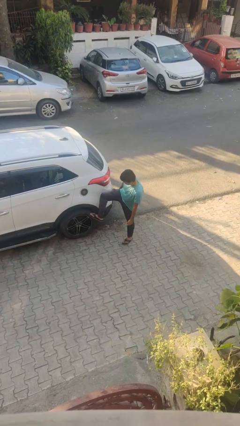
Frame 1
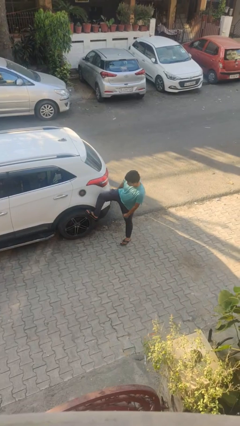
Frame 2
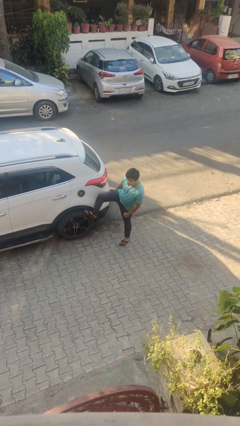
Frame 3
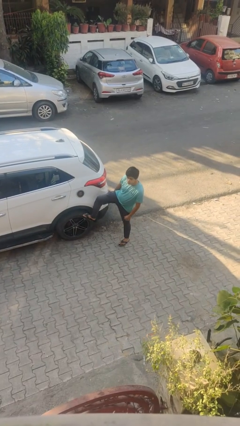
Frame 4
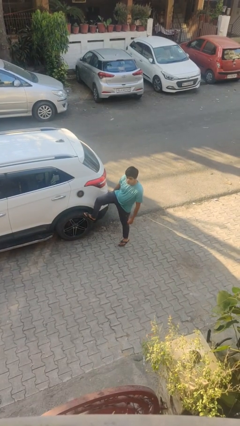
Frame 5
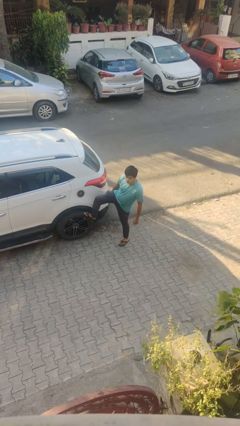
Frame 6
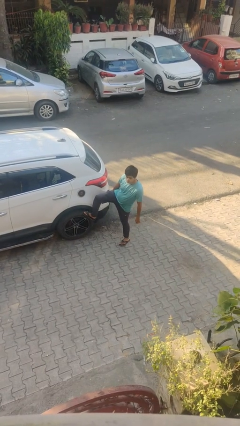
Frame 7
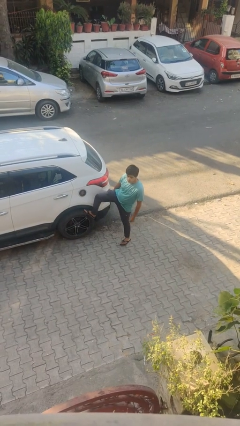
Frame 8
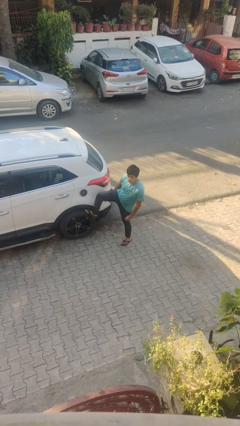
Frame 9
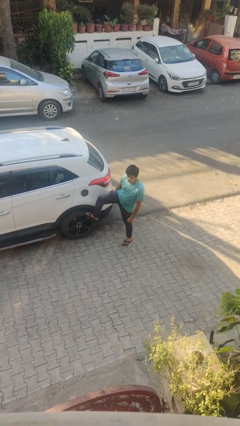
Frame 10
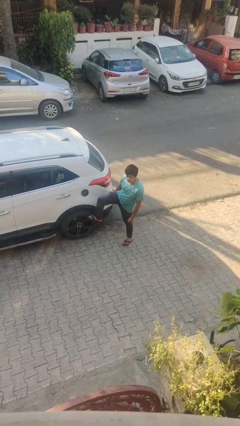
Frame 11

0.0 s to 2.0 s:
person kicks car tires

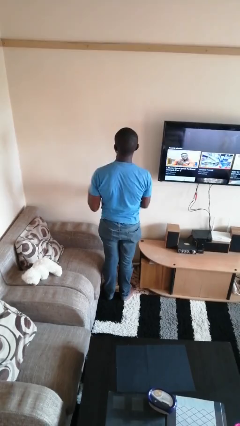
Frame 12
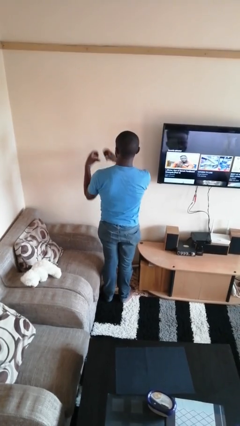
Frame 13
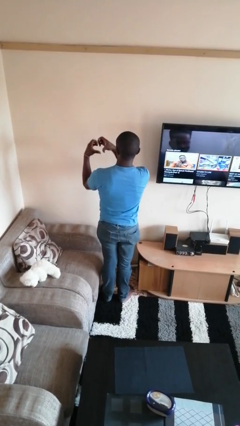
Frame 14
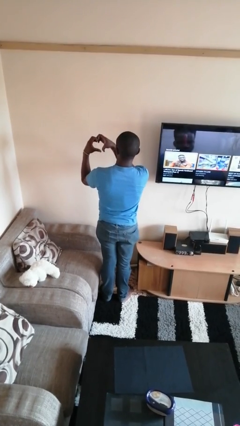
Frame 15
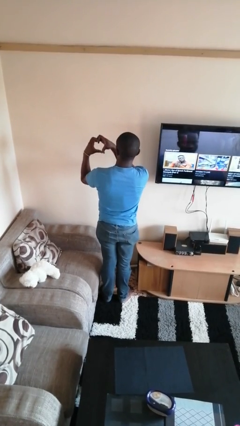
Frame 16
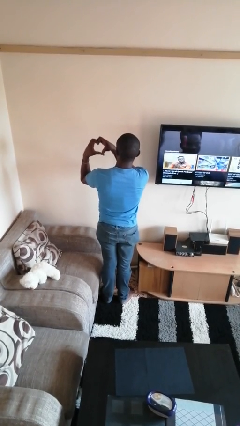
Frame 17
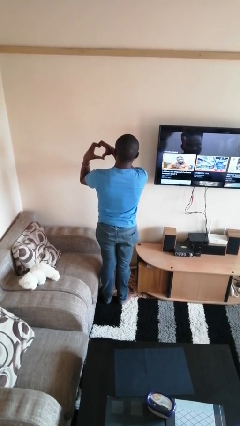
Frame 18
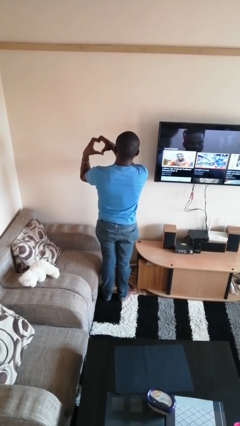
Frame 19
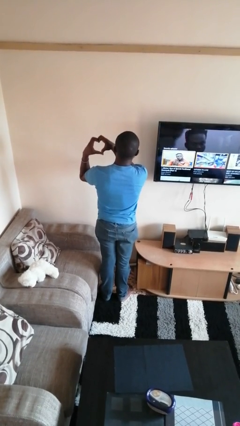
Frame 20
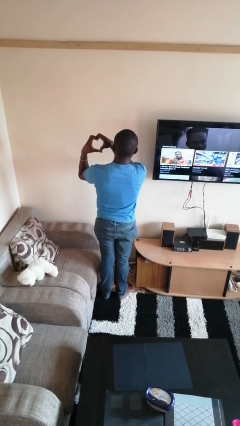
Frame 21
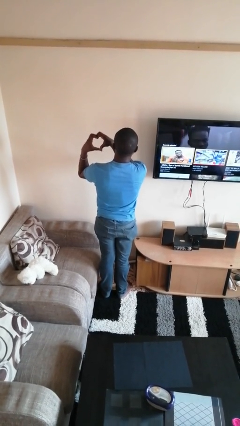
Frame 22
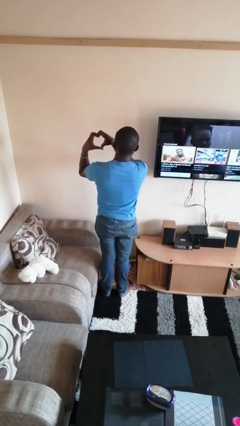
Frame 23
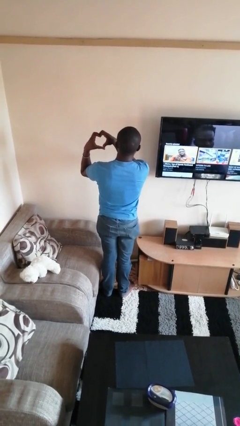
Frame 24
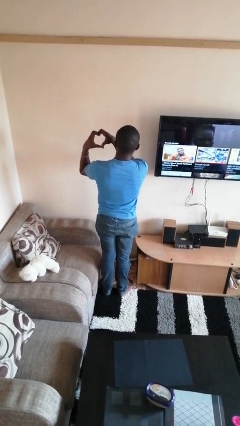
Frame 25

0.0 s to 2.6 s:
person gestures heart

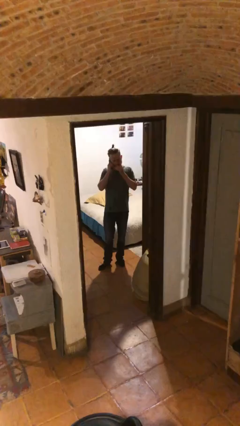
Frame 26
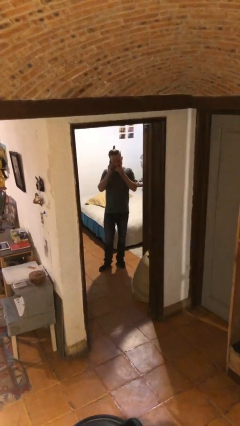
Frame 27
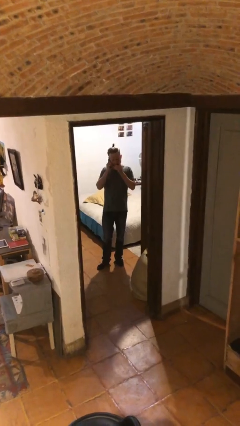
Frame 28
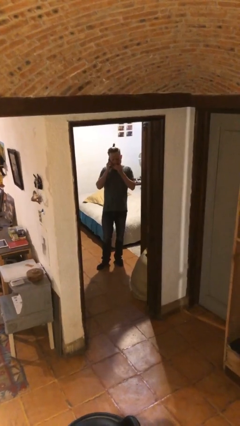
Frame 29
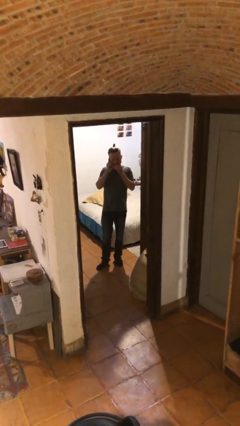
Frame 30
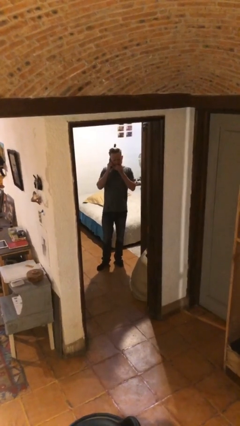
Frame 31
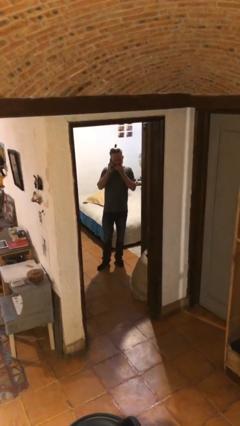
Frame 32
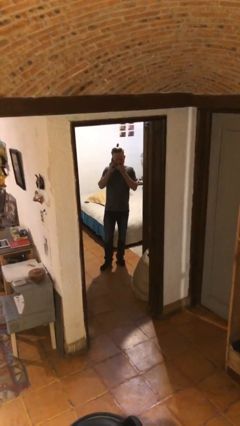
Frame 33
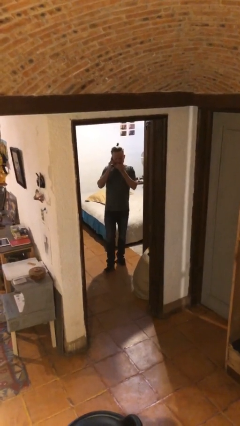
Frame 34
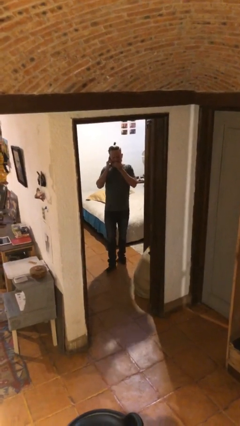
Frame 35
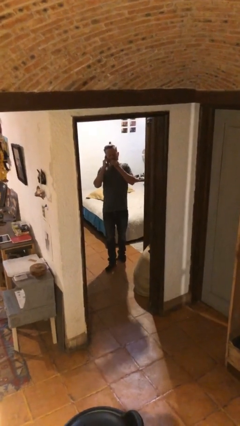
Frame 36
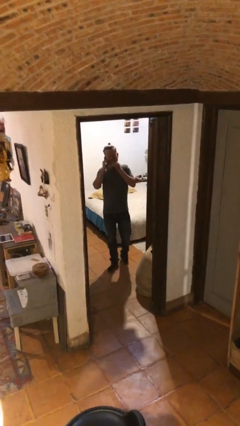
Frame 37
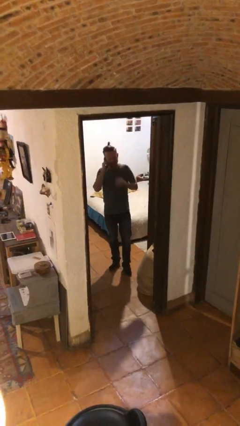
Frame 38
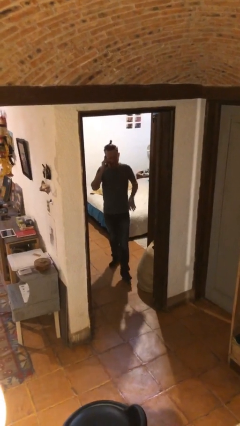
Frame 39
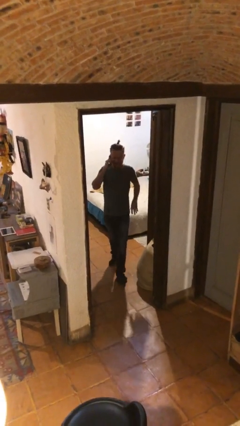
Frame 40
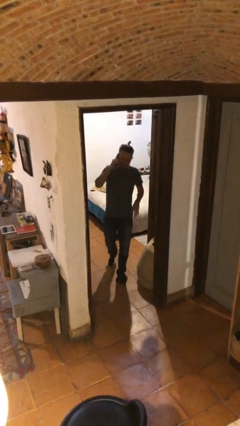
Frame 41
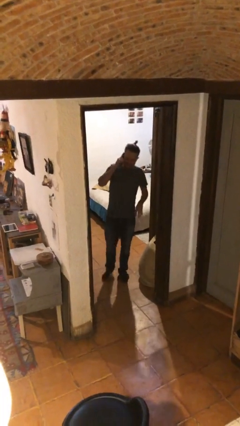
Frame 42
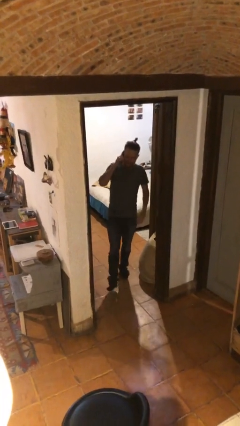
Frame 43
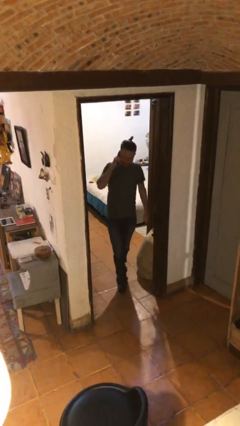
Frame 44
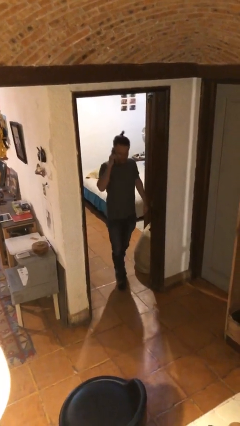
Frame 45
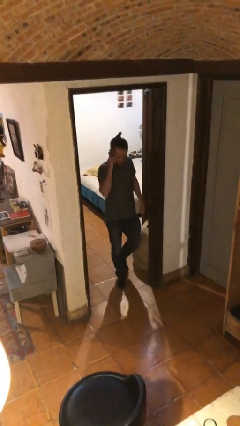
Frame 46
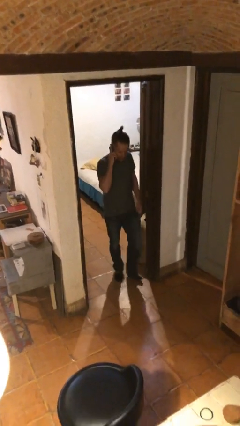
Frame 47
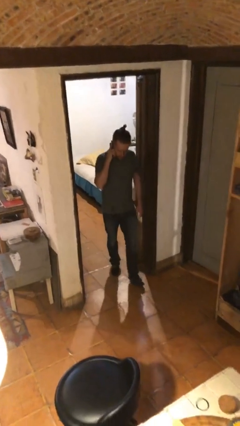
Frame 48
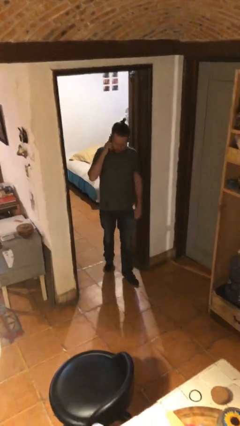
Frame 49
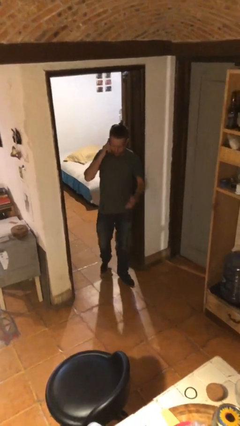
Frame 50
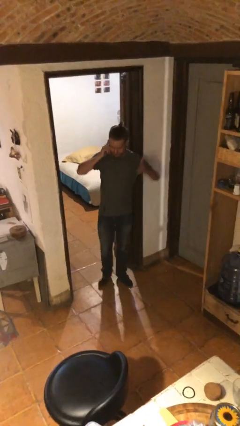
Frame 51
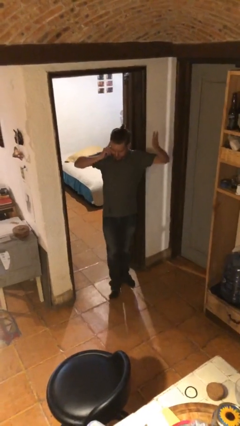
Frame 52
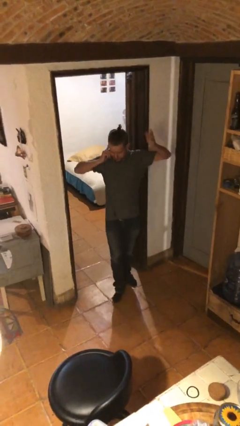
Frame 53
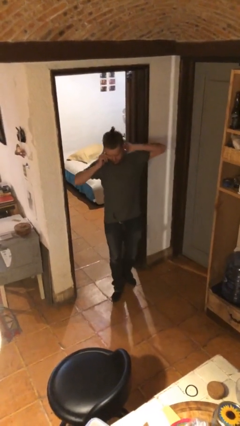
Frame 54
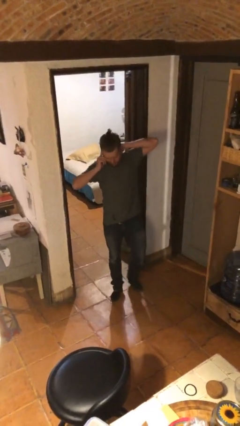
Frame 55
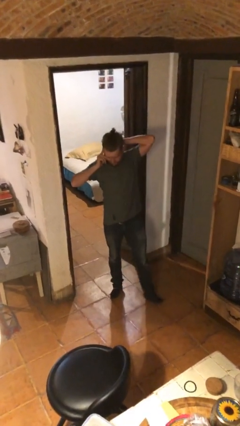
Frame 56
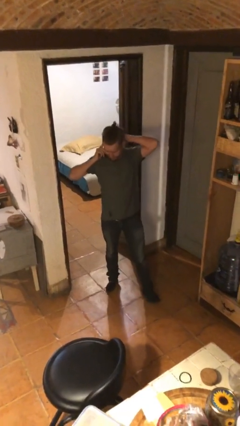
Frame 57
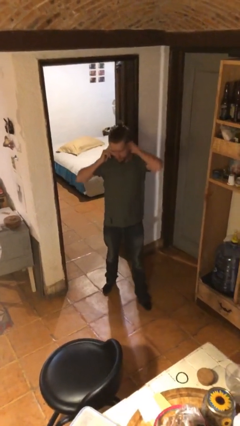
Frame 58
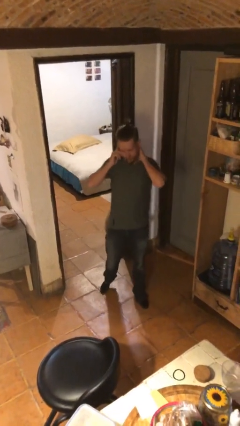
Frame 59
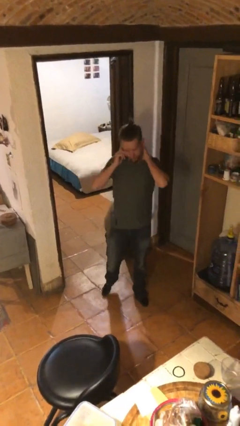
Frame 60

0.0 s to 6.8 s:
person enters scene through structure

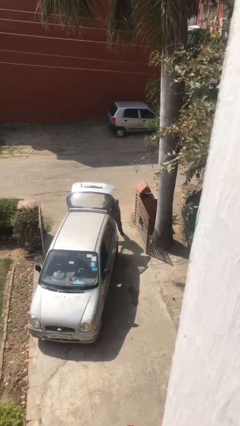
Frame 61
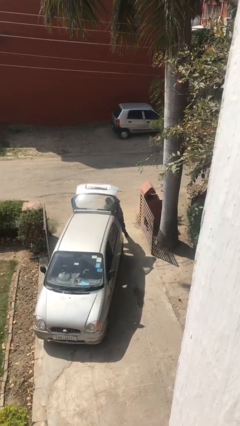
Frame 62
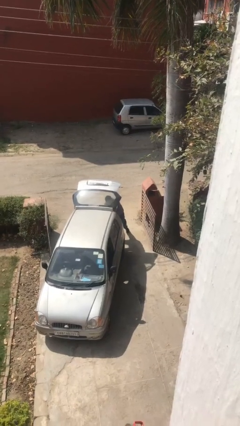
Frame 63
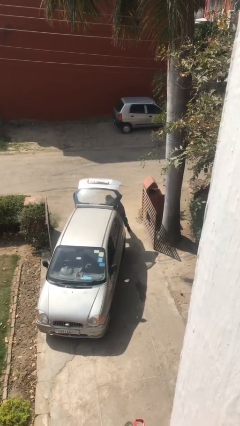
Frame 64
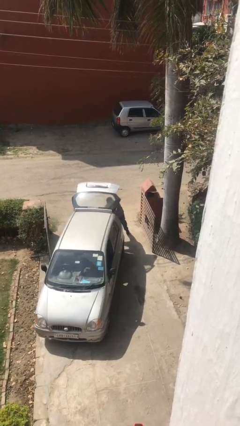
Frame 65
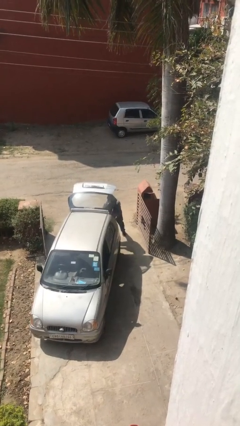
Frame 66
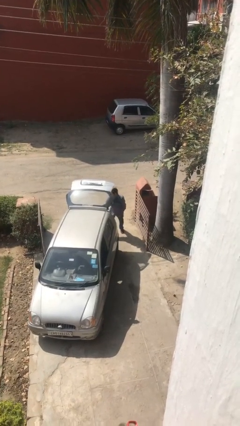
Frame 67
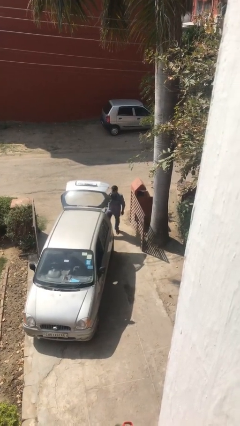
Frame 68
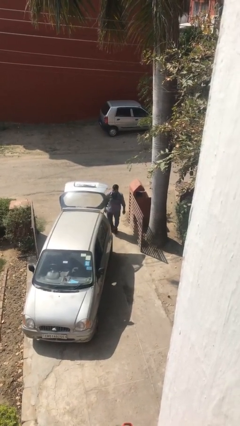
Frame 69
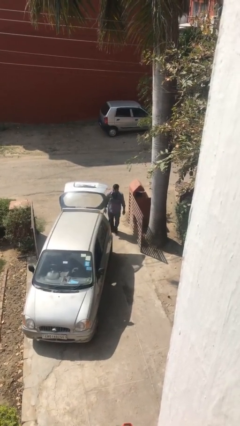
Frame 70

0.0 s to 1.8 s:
person loads car

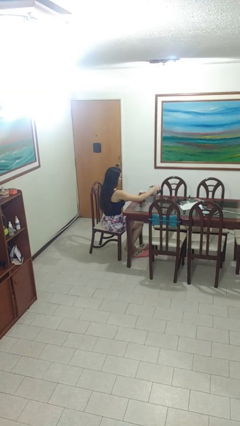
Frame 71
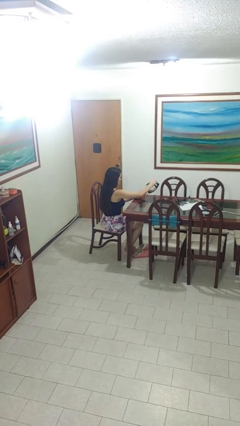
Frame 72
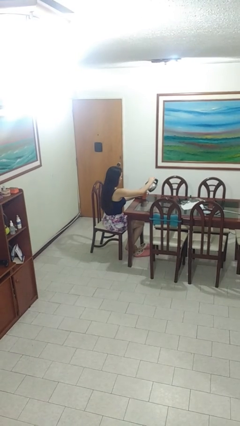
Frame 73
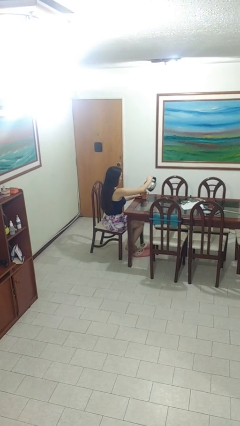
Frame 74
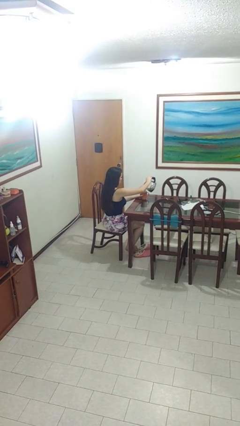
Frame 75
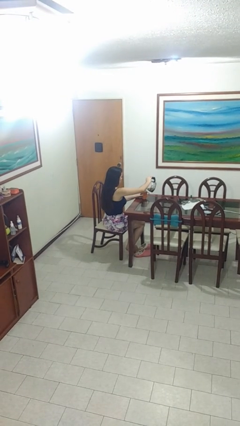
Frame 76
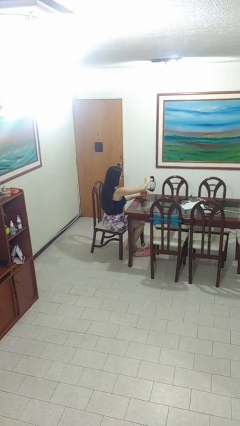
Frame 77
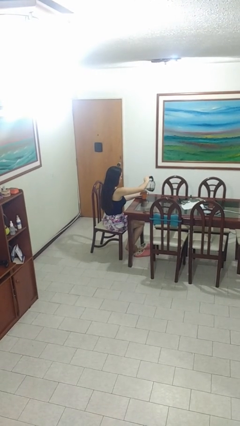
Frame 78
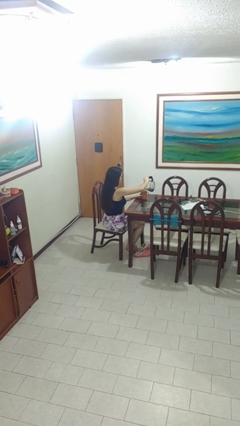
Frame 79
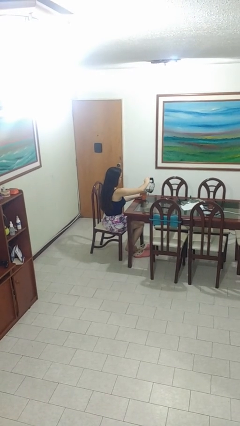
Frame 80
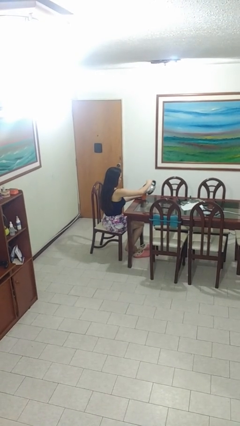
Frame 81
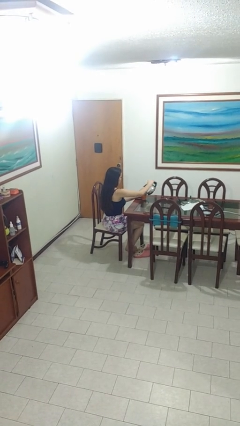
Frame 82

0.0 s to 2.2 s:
person pours coffee into mug

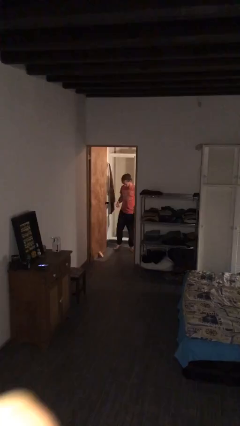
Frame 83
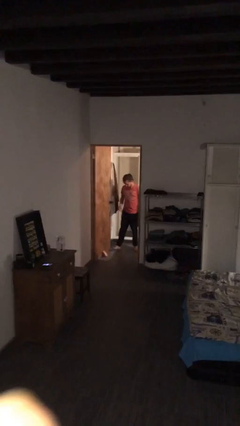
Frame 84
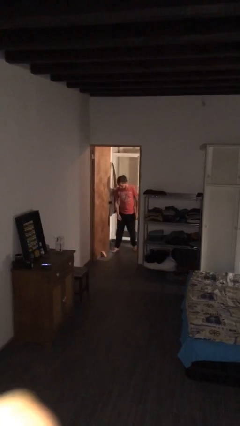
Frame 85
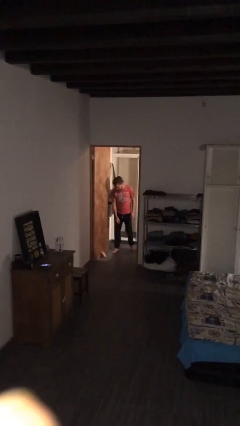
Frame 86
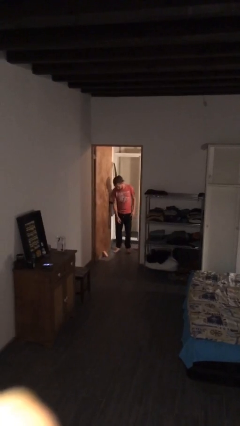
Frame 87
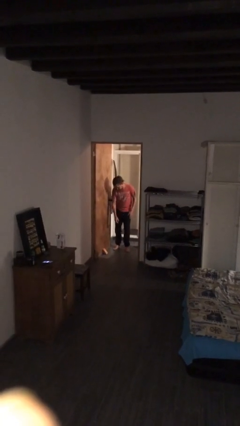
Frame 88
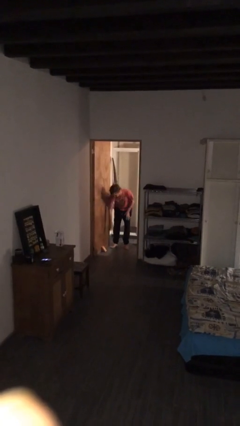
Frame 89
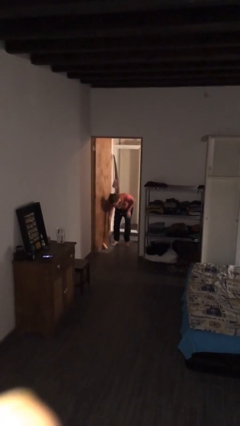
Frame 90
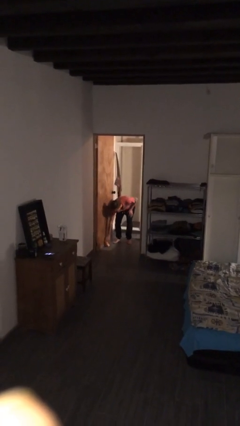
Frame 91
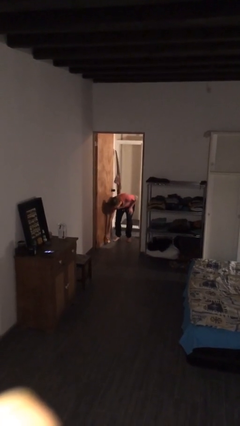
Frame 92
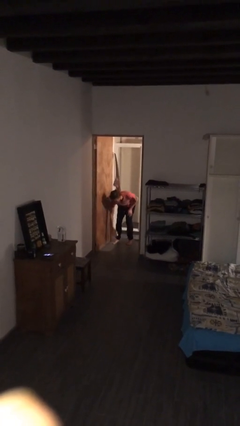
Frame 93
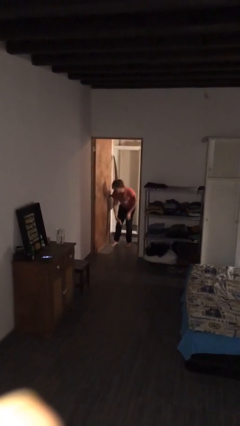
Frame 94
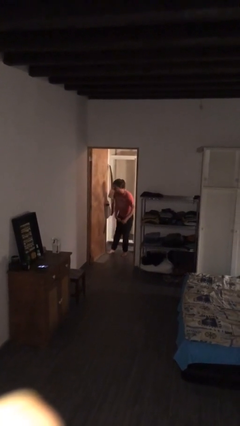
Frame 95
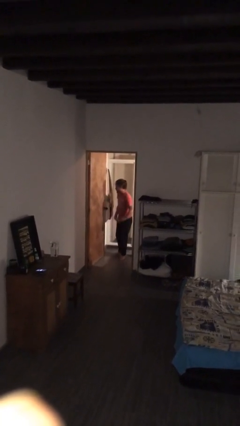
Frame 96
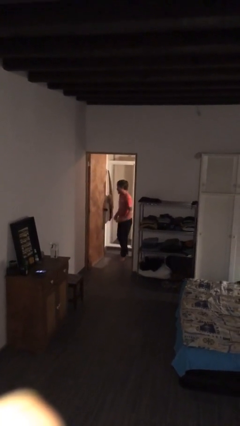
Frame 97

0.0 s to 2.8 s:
person picks up object from floor
